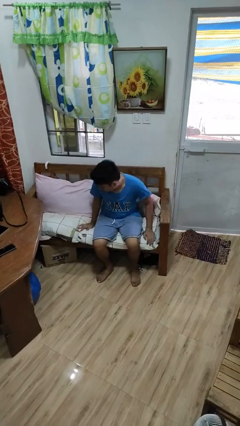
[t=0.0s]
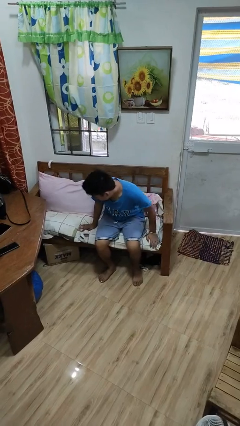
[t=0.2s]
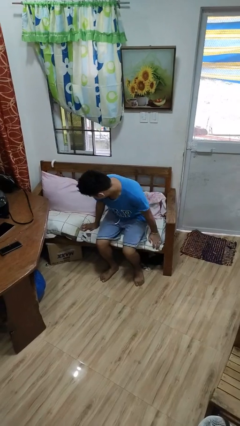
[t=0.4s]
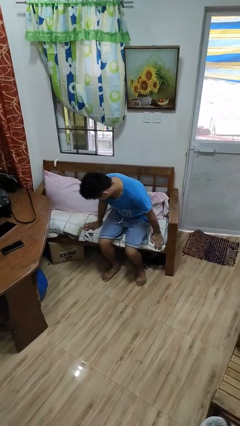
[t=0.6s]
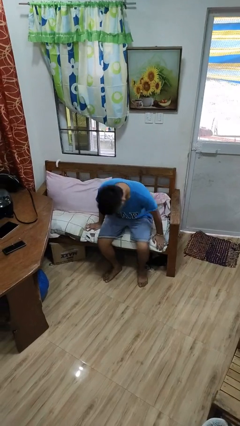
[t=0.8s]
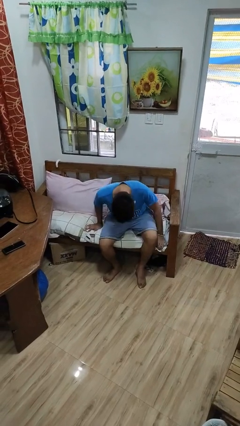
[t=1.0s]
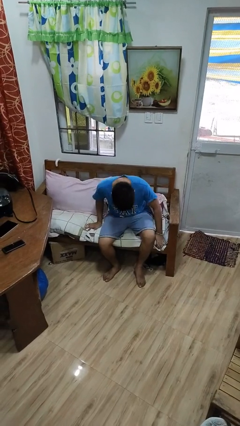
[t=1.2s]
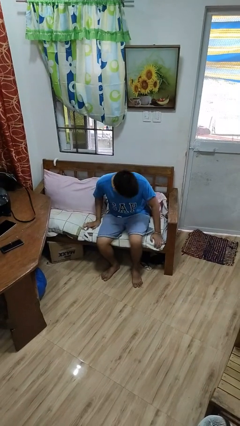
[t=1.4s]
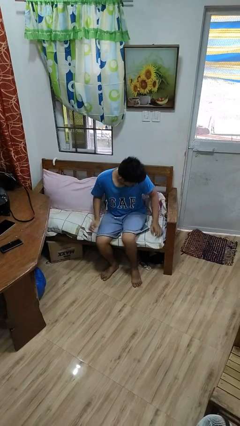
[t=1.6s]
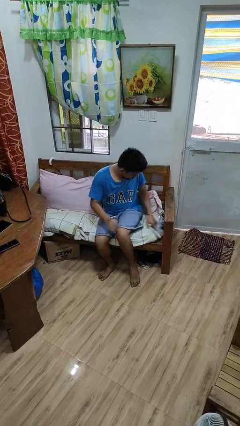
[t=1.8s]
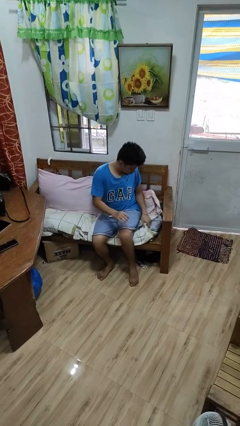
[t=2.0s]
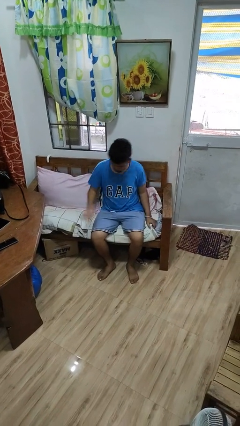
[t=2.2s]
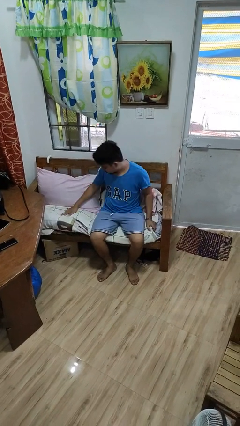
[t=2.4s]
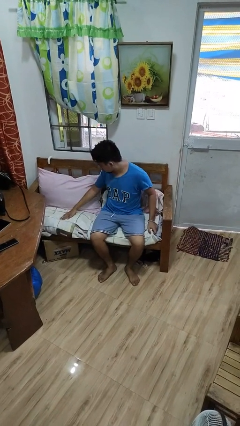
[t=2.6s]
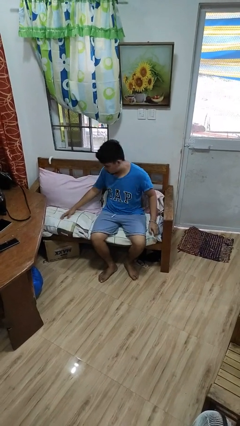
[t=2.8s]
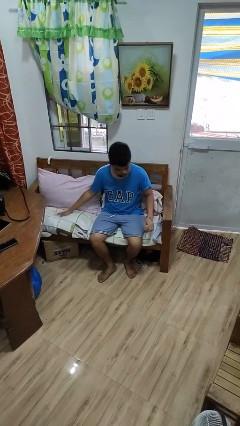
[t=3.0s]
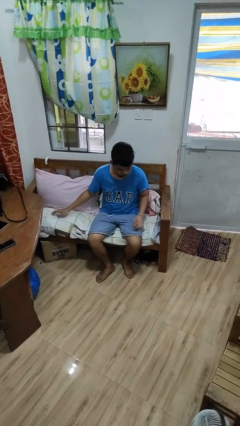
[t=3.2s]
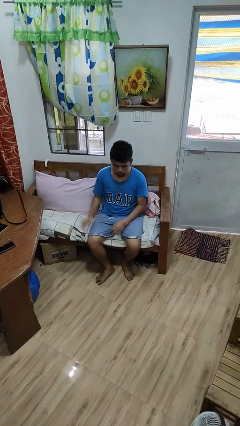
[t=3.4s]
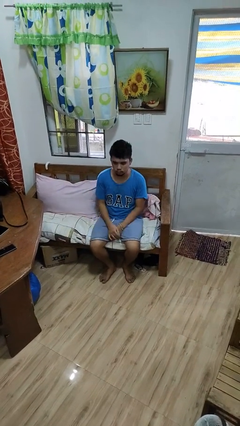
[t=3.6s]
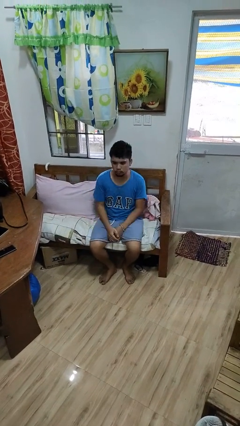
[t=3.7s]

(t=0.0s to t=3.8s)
person searches in couch

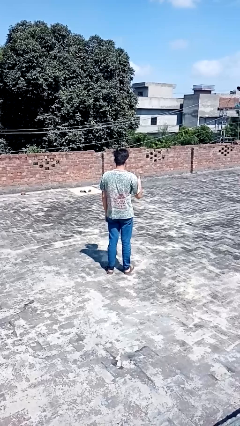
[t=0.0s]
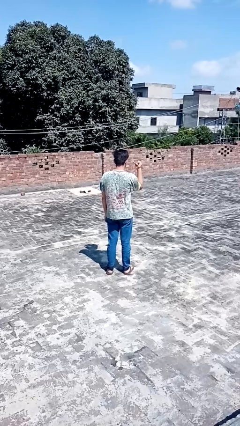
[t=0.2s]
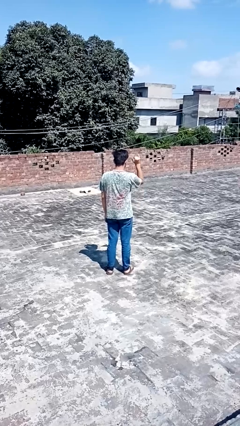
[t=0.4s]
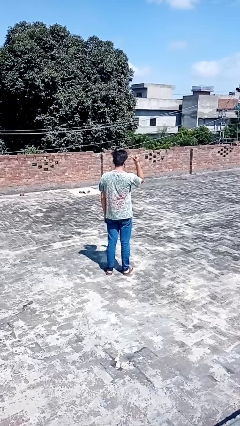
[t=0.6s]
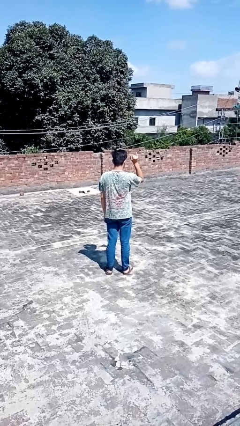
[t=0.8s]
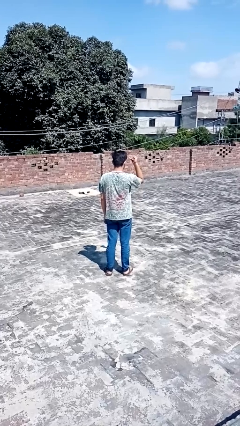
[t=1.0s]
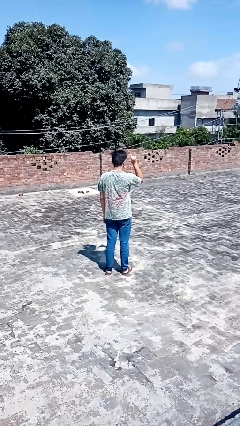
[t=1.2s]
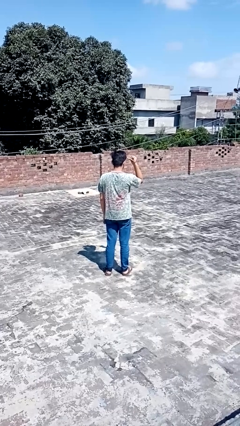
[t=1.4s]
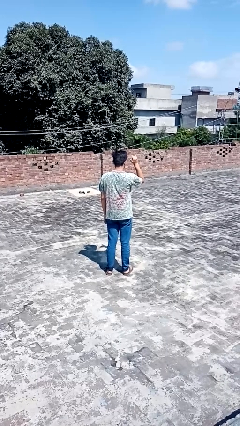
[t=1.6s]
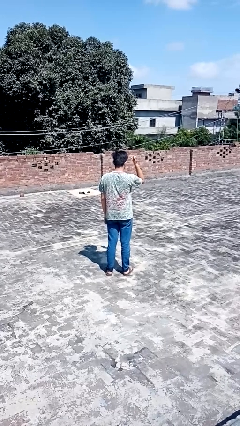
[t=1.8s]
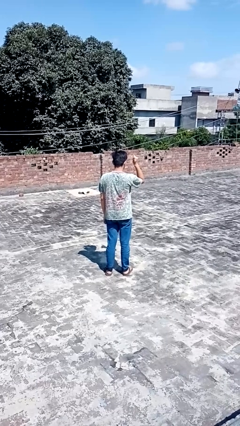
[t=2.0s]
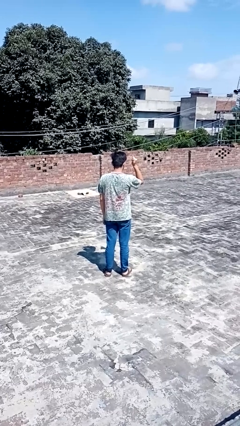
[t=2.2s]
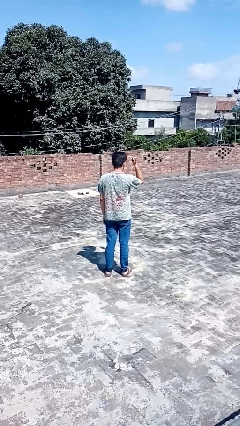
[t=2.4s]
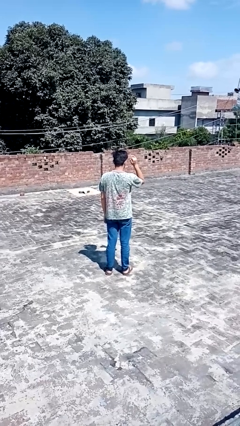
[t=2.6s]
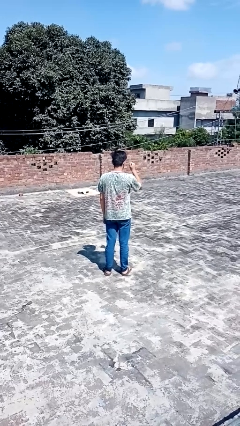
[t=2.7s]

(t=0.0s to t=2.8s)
person gestures hang loose

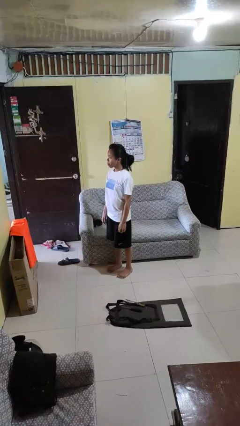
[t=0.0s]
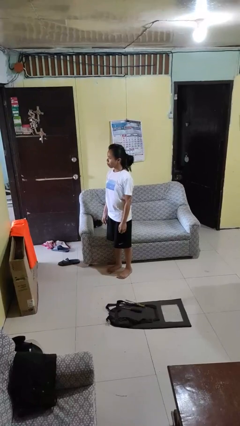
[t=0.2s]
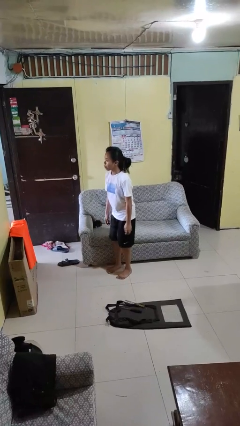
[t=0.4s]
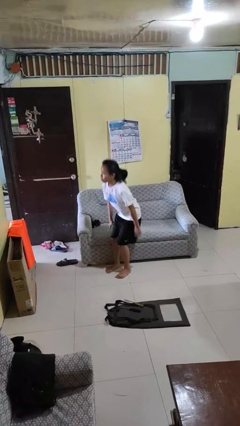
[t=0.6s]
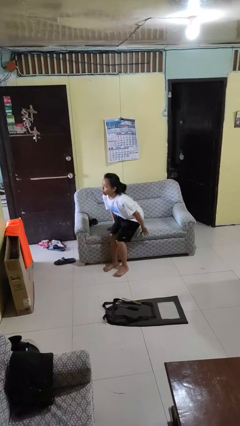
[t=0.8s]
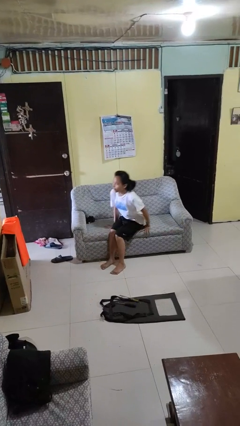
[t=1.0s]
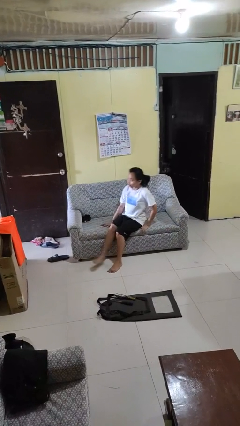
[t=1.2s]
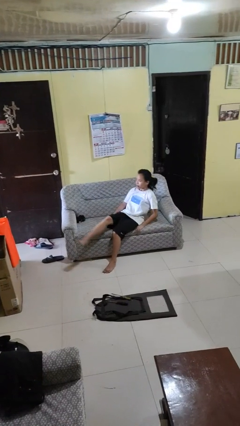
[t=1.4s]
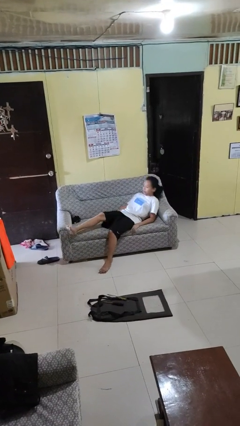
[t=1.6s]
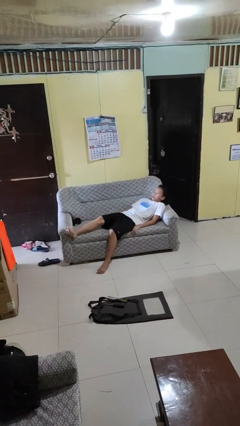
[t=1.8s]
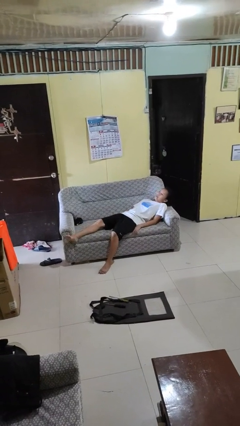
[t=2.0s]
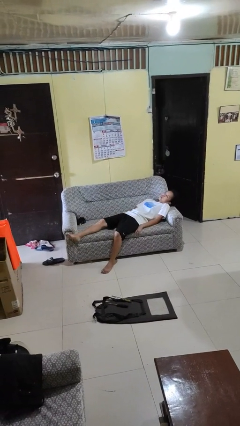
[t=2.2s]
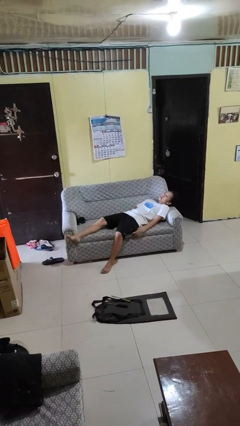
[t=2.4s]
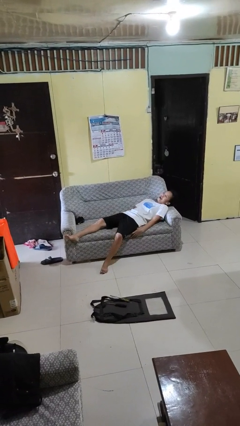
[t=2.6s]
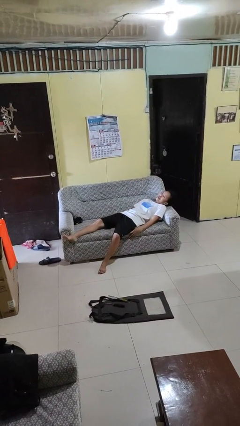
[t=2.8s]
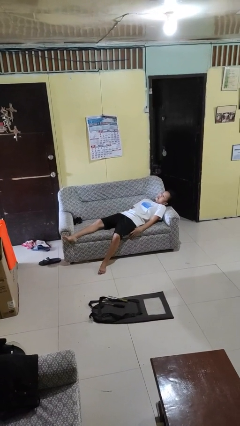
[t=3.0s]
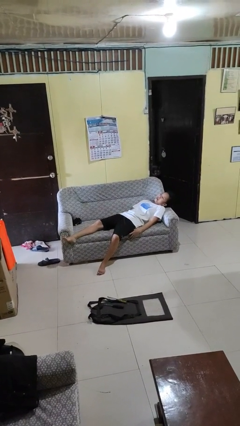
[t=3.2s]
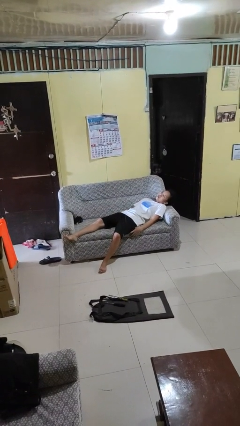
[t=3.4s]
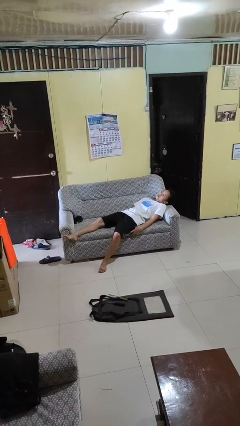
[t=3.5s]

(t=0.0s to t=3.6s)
person lies down on couch

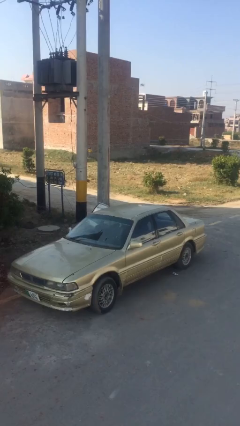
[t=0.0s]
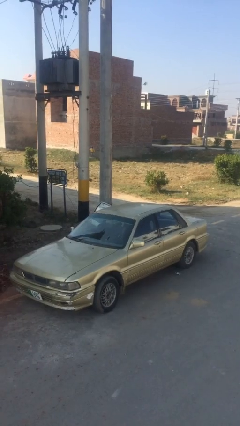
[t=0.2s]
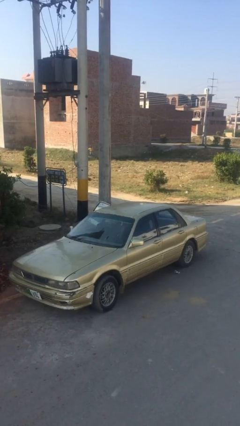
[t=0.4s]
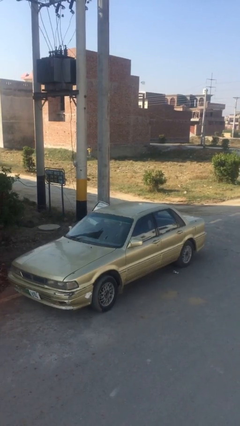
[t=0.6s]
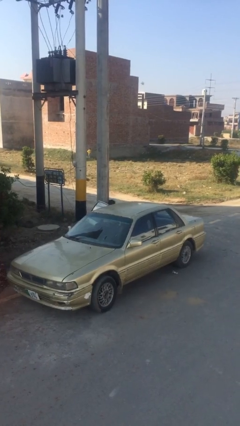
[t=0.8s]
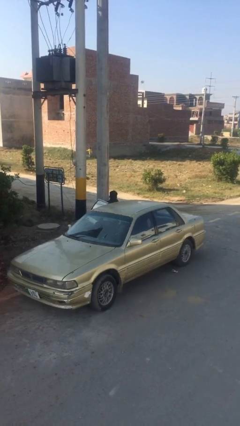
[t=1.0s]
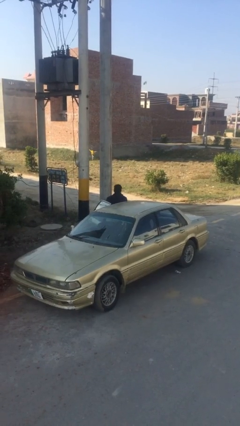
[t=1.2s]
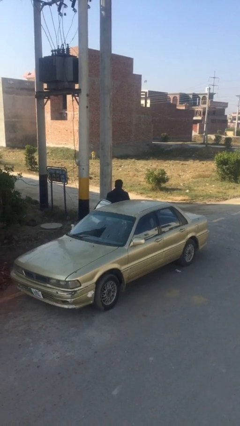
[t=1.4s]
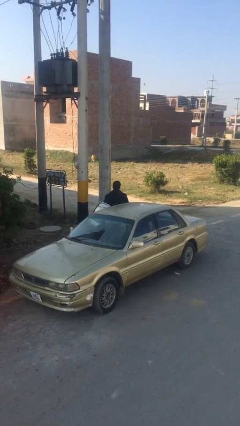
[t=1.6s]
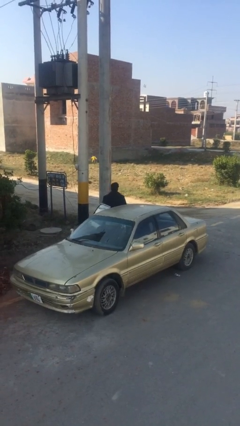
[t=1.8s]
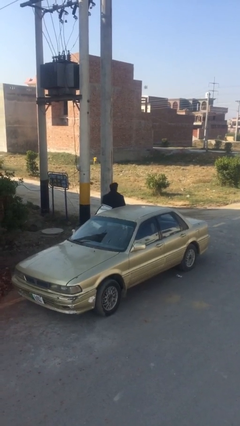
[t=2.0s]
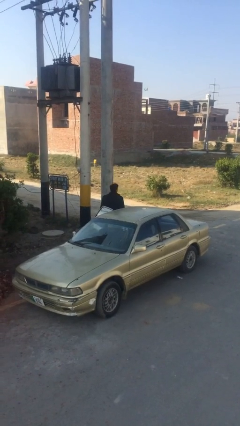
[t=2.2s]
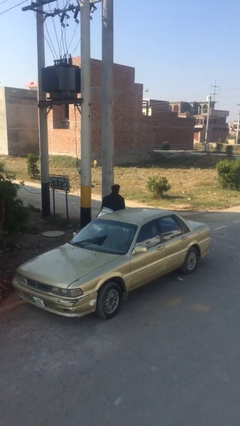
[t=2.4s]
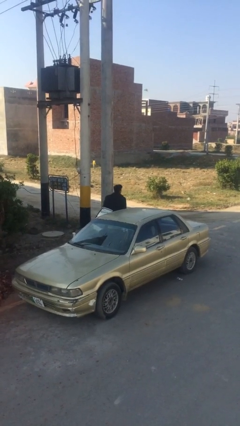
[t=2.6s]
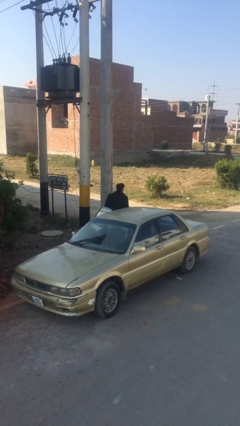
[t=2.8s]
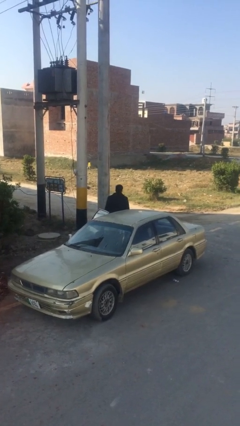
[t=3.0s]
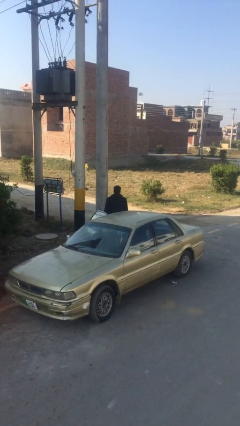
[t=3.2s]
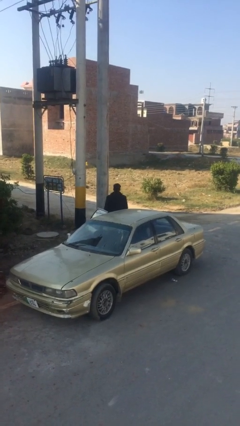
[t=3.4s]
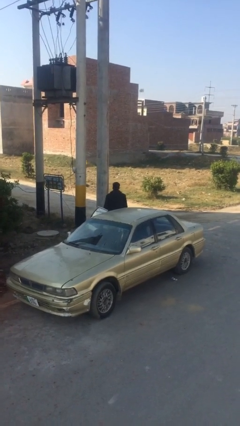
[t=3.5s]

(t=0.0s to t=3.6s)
person exits car

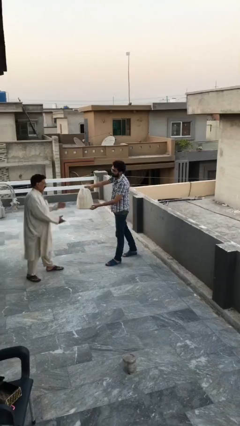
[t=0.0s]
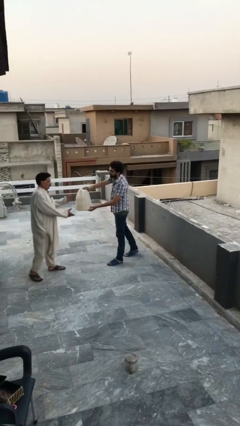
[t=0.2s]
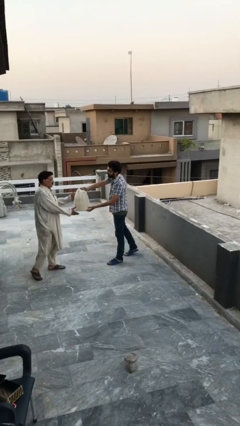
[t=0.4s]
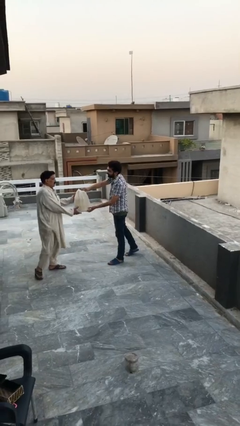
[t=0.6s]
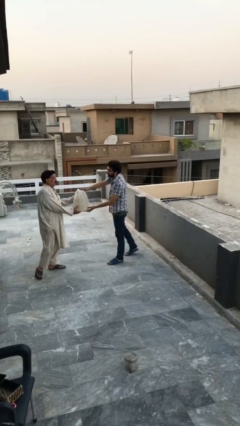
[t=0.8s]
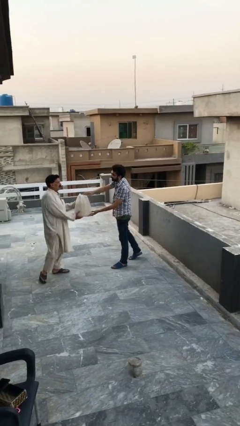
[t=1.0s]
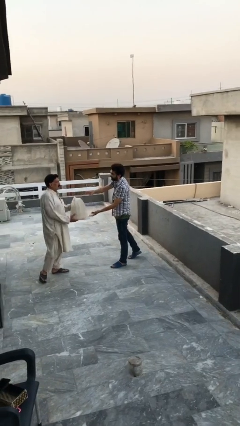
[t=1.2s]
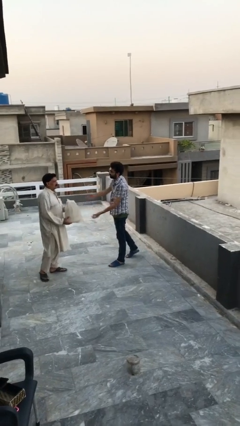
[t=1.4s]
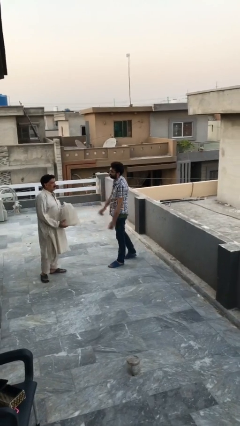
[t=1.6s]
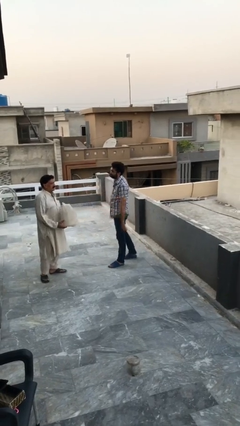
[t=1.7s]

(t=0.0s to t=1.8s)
person transfers object to person

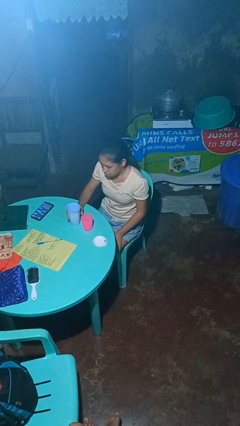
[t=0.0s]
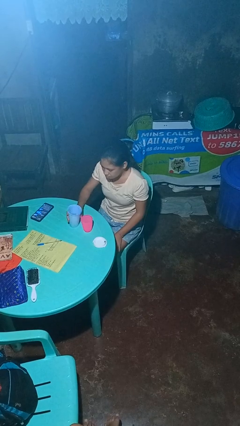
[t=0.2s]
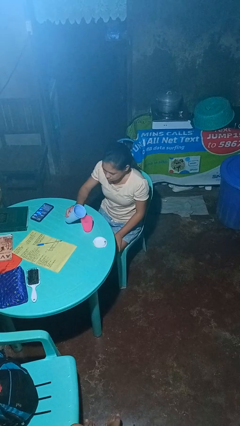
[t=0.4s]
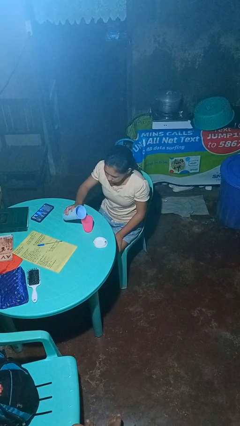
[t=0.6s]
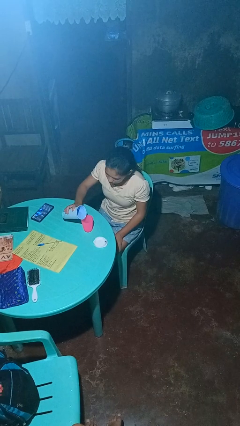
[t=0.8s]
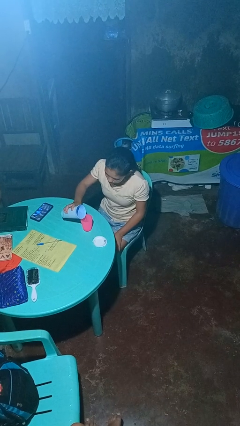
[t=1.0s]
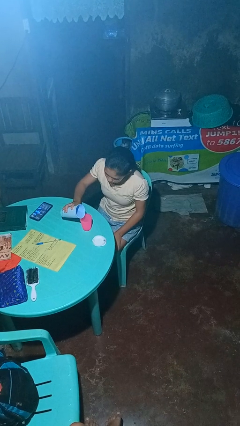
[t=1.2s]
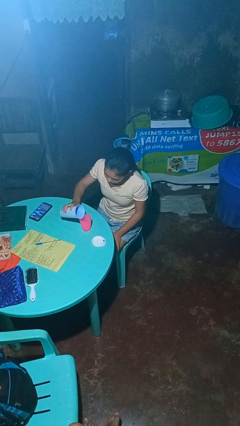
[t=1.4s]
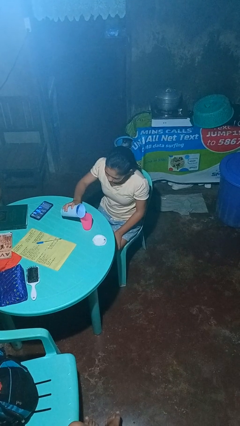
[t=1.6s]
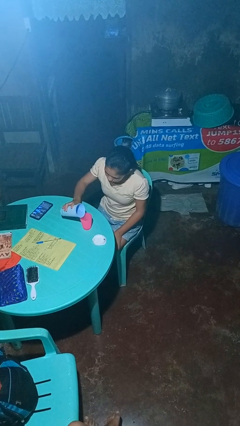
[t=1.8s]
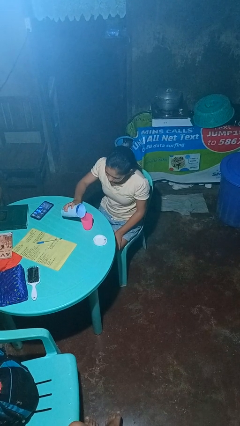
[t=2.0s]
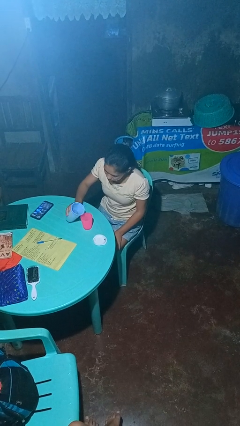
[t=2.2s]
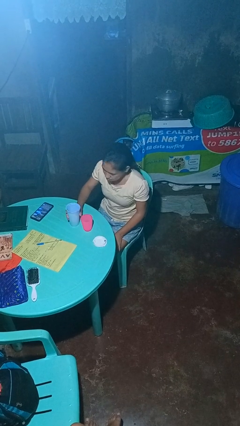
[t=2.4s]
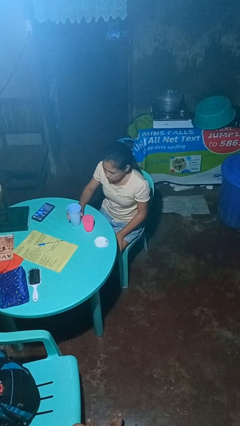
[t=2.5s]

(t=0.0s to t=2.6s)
person pours liquid into cup
